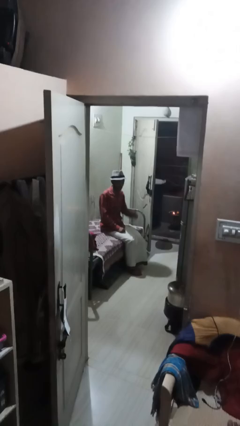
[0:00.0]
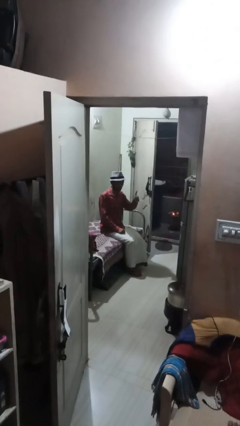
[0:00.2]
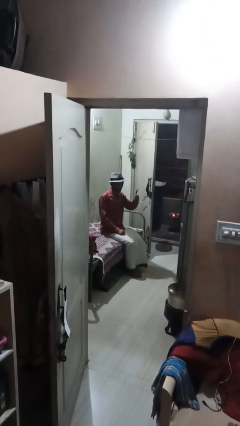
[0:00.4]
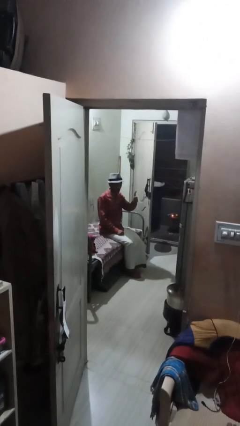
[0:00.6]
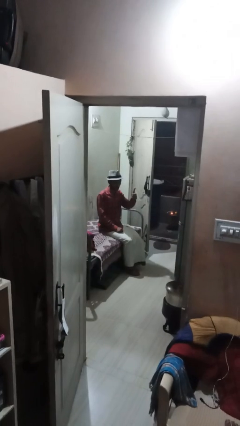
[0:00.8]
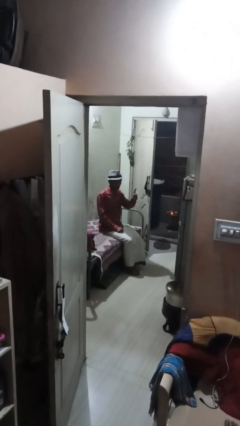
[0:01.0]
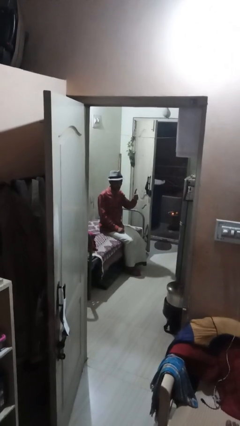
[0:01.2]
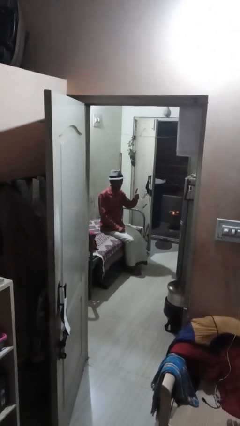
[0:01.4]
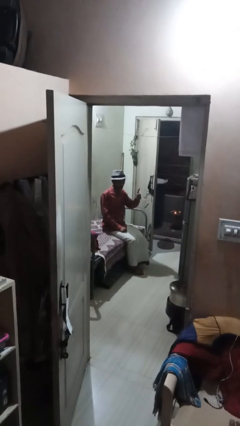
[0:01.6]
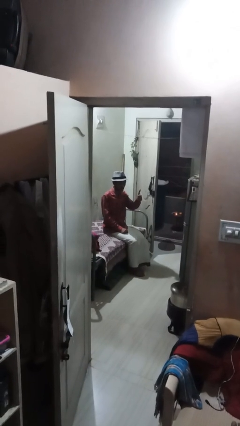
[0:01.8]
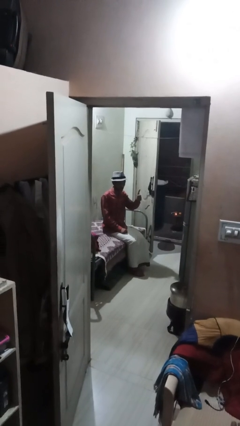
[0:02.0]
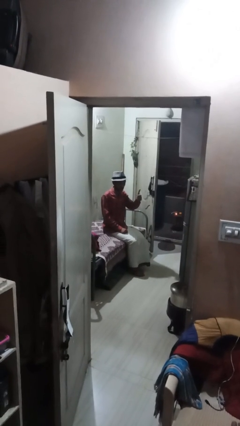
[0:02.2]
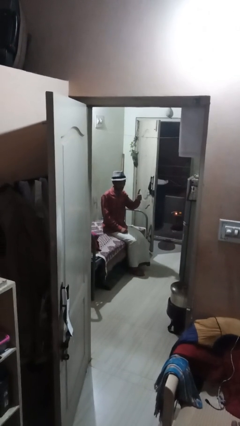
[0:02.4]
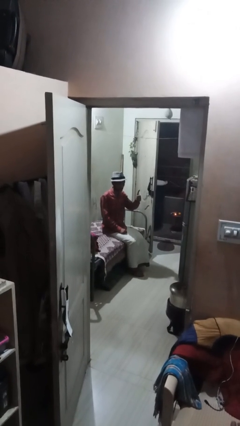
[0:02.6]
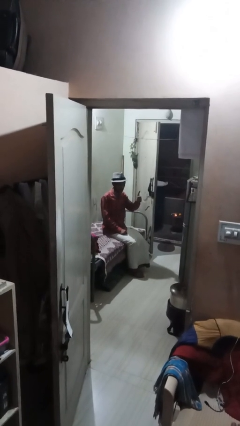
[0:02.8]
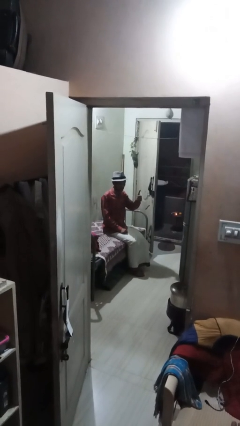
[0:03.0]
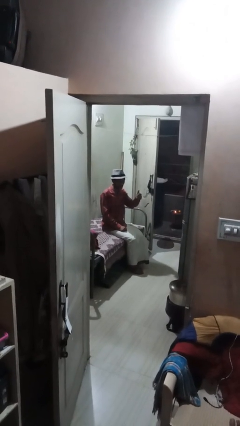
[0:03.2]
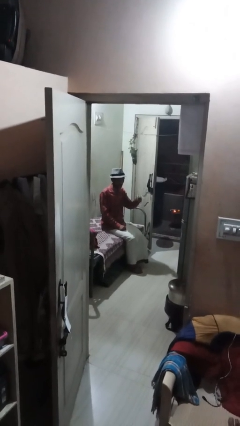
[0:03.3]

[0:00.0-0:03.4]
person gestures thumbs up

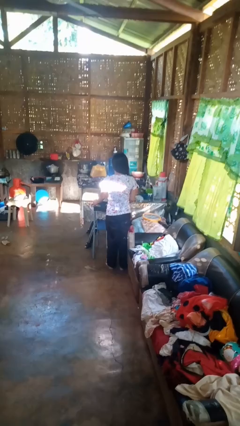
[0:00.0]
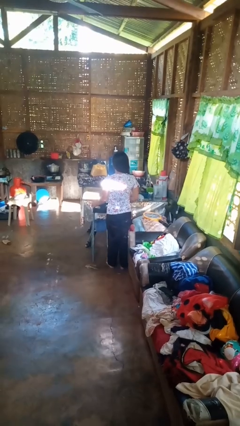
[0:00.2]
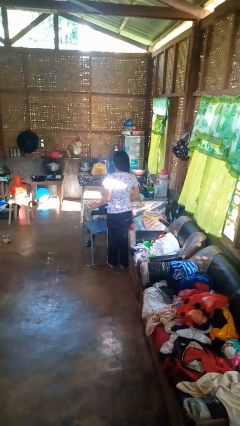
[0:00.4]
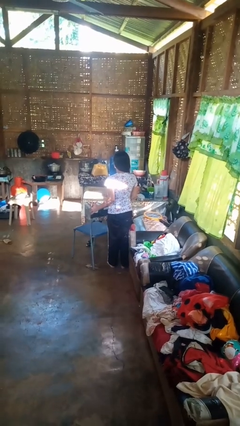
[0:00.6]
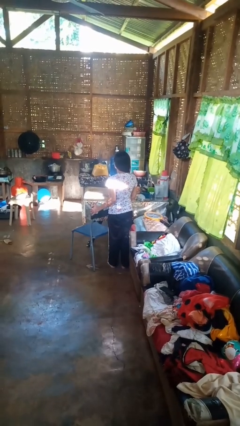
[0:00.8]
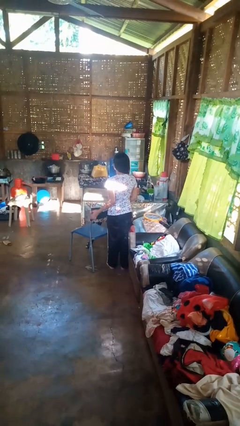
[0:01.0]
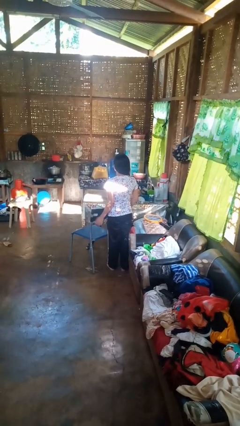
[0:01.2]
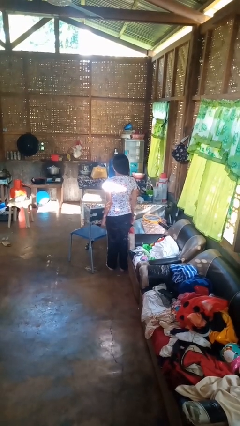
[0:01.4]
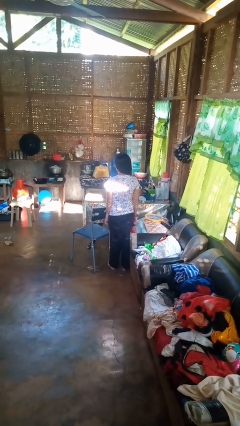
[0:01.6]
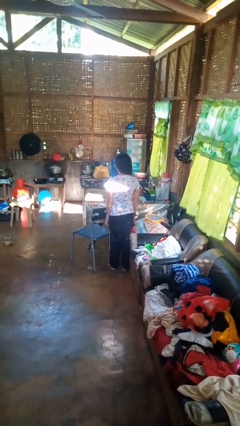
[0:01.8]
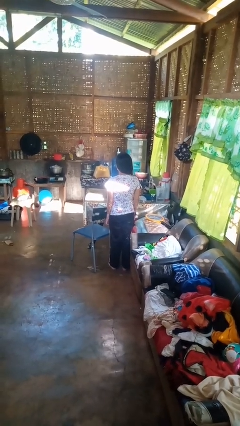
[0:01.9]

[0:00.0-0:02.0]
person pulls out chair

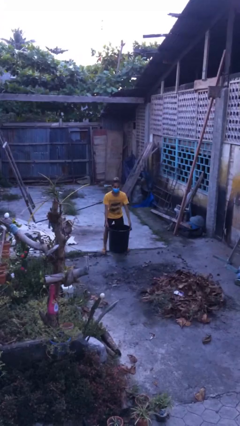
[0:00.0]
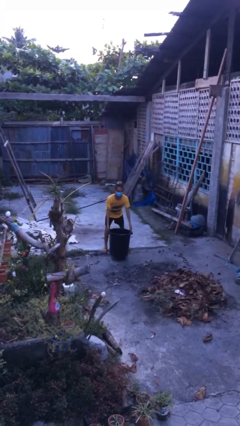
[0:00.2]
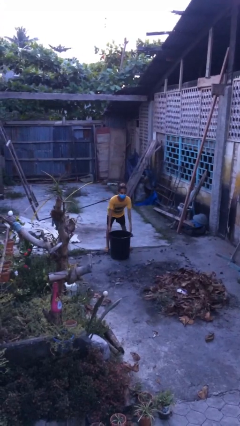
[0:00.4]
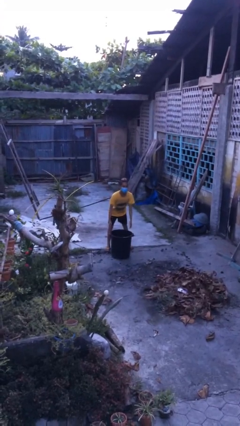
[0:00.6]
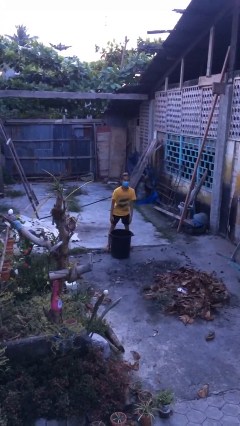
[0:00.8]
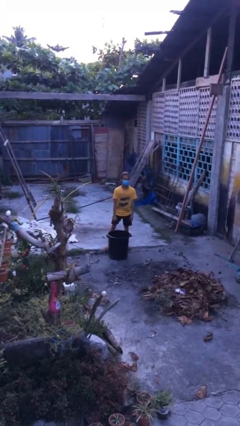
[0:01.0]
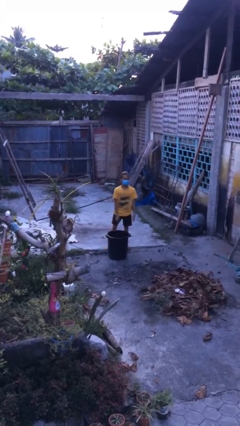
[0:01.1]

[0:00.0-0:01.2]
person puts down object on floor

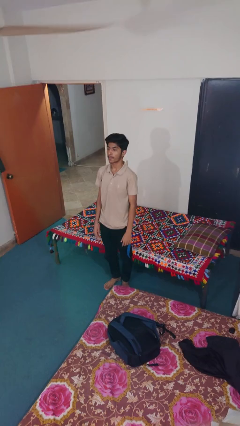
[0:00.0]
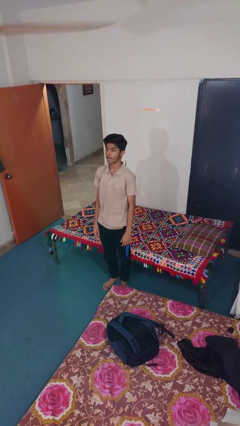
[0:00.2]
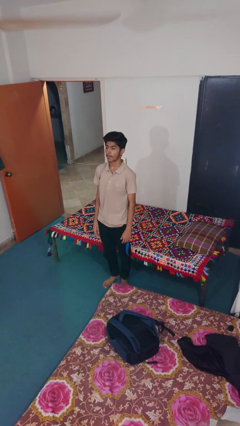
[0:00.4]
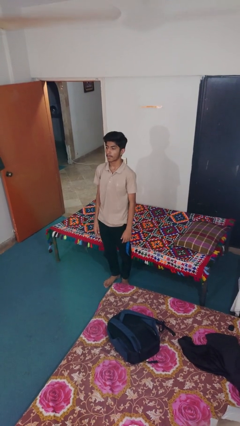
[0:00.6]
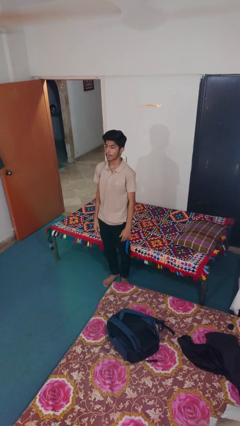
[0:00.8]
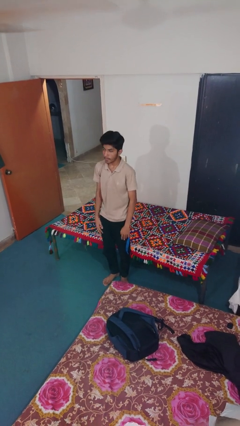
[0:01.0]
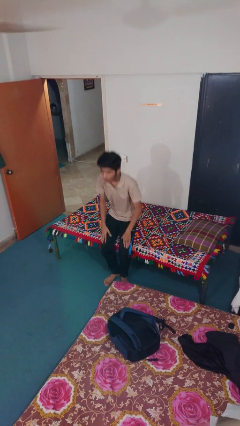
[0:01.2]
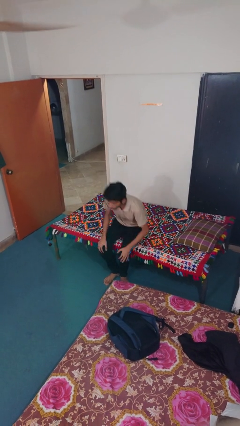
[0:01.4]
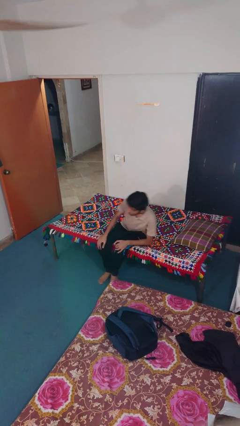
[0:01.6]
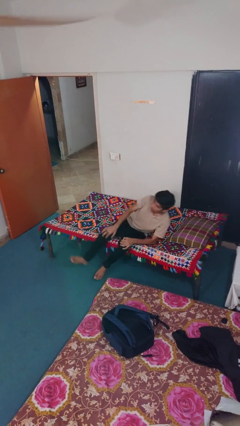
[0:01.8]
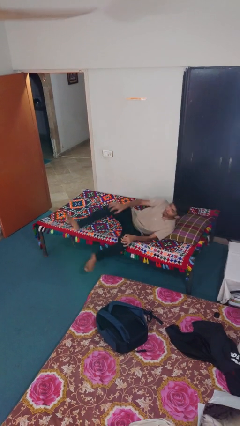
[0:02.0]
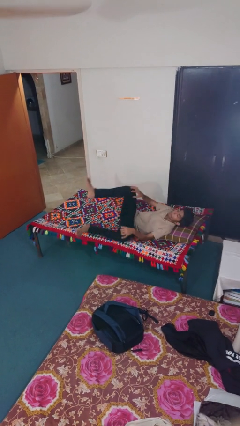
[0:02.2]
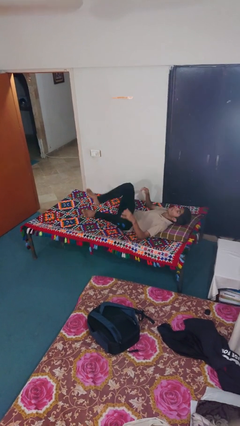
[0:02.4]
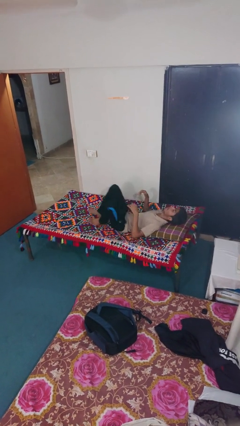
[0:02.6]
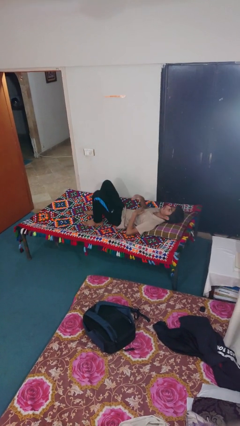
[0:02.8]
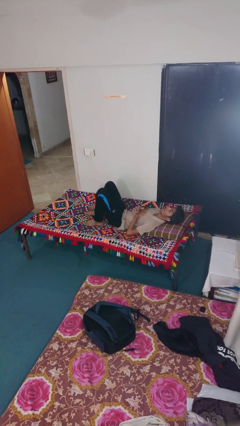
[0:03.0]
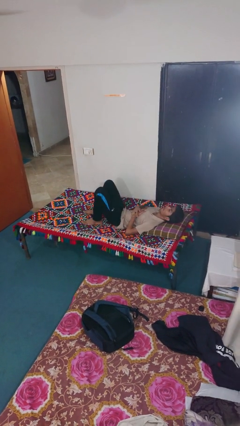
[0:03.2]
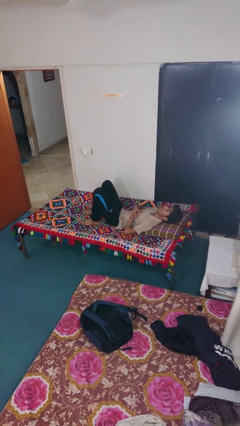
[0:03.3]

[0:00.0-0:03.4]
person lies down on bed

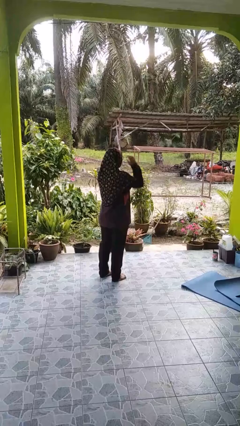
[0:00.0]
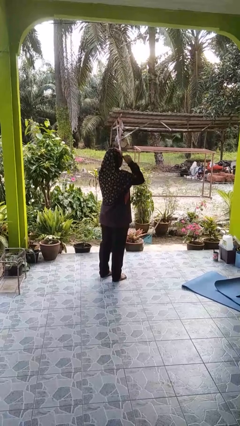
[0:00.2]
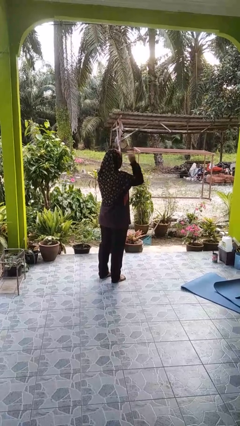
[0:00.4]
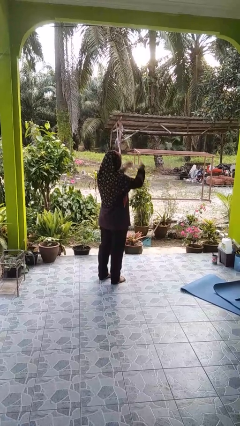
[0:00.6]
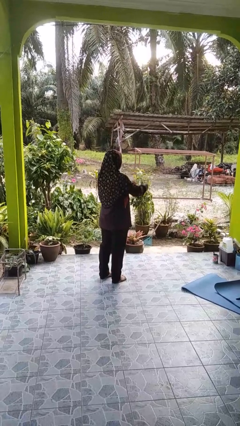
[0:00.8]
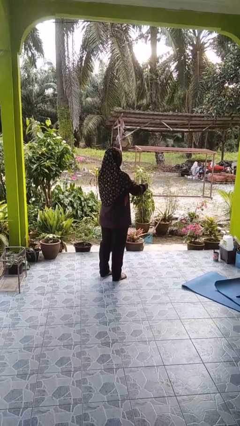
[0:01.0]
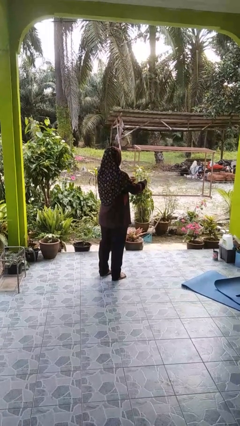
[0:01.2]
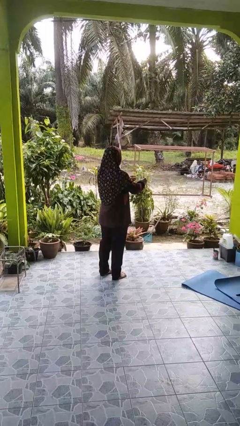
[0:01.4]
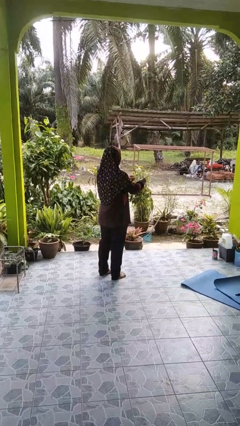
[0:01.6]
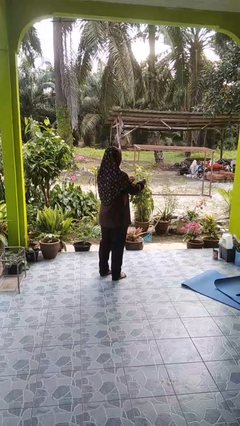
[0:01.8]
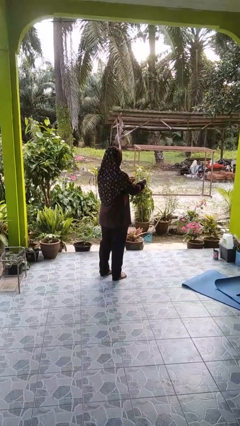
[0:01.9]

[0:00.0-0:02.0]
person takes off glasses

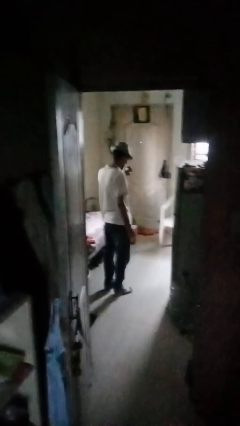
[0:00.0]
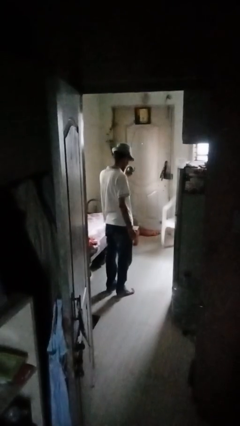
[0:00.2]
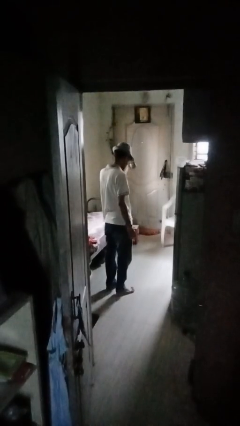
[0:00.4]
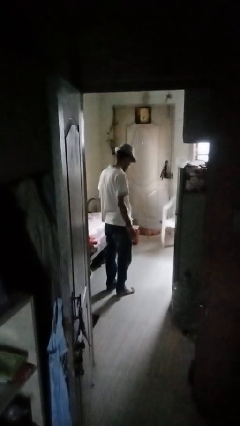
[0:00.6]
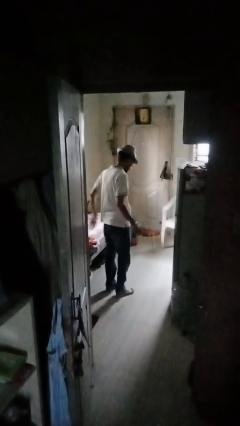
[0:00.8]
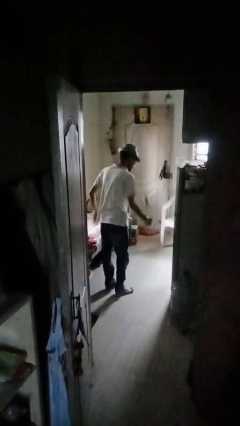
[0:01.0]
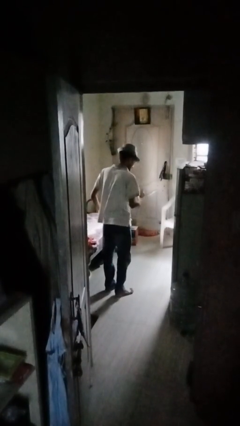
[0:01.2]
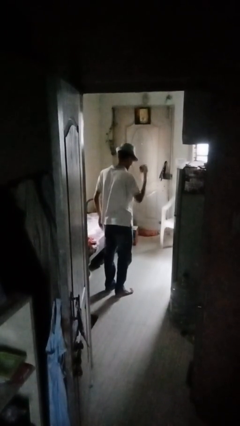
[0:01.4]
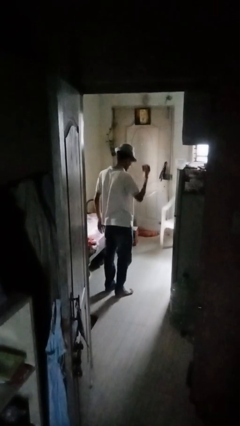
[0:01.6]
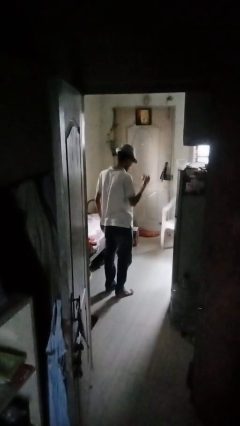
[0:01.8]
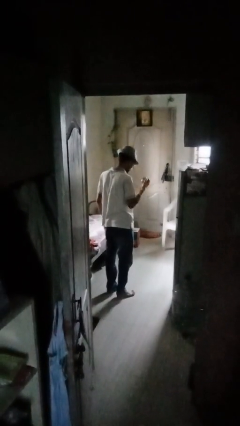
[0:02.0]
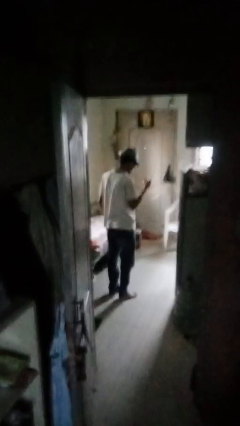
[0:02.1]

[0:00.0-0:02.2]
person bounces ball on floor

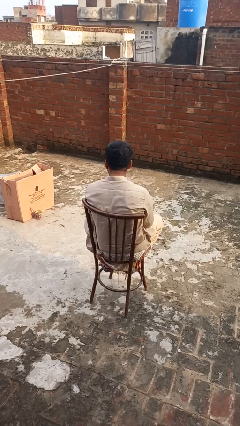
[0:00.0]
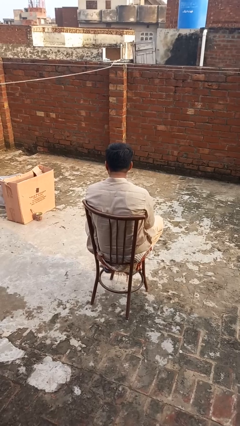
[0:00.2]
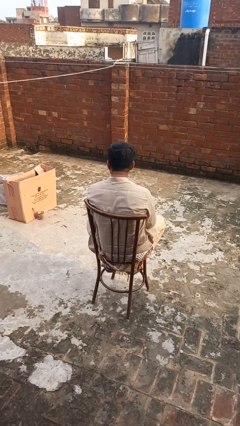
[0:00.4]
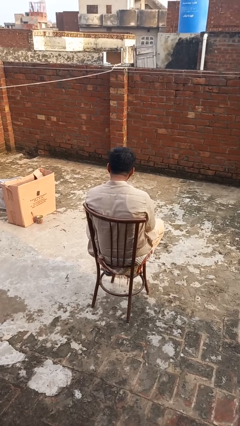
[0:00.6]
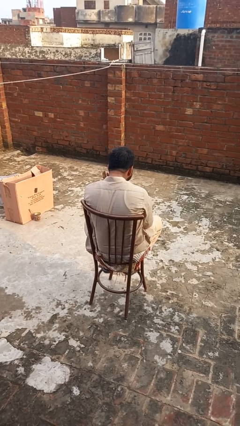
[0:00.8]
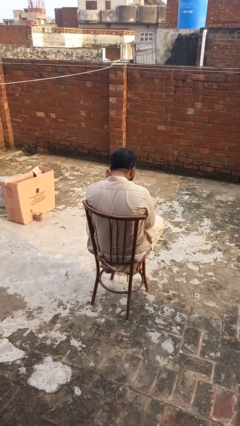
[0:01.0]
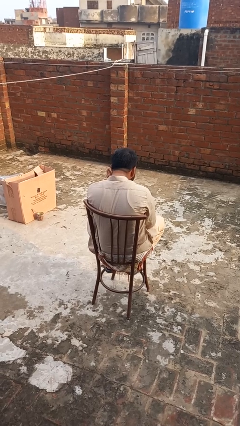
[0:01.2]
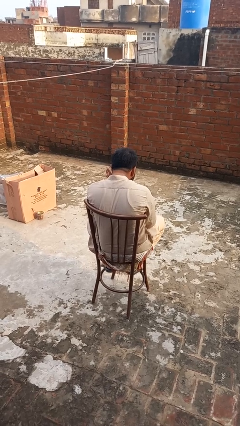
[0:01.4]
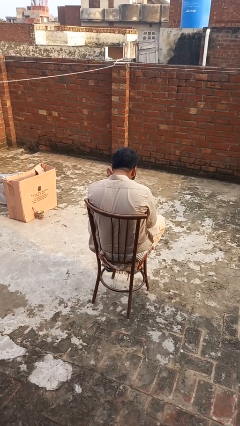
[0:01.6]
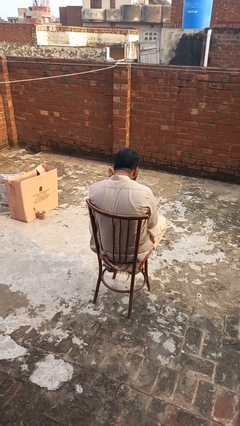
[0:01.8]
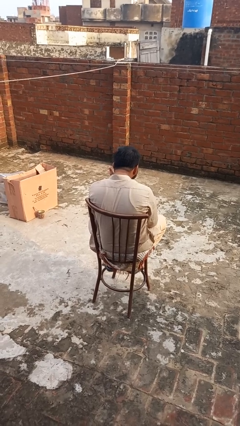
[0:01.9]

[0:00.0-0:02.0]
person gestures listen closely

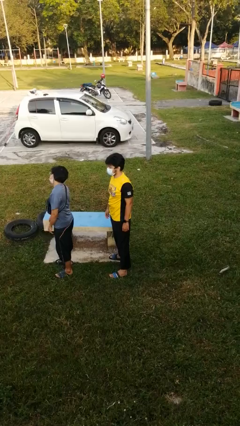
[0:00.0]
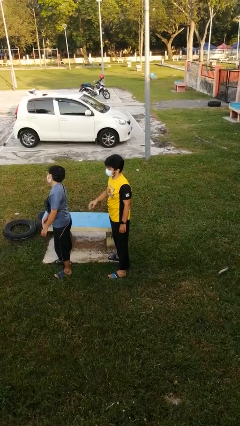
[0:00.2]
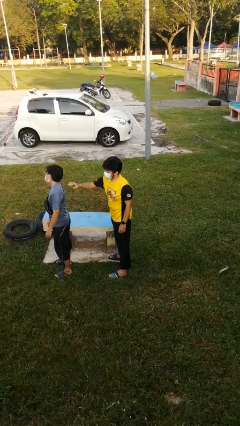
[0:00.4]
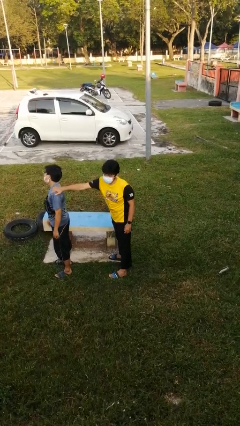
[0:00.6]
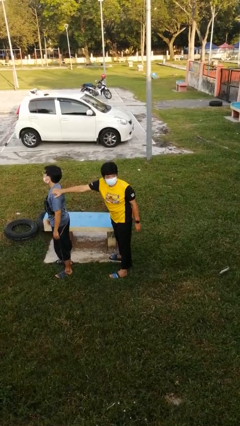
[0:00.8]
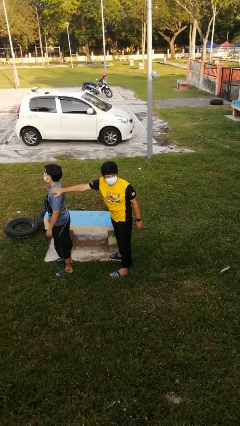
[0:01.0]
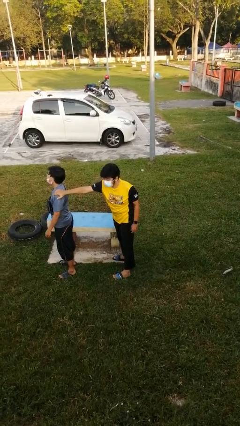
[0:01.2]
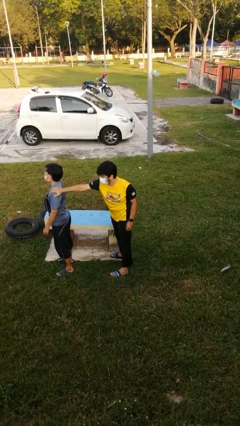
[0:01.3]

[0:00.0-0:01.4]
person grabs person by shoulder
